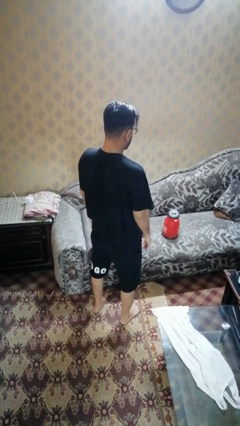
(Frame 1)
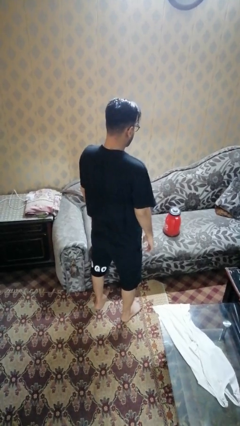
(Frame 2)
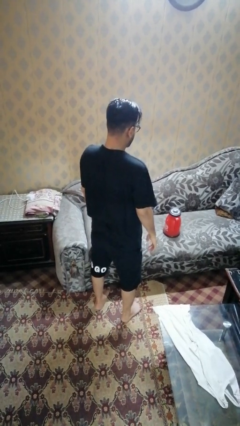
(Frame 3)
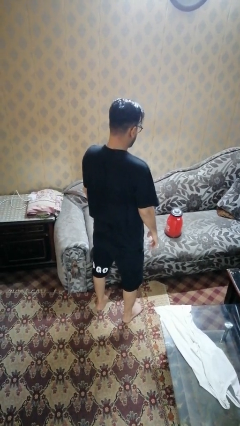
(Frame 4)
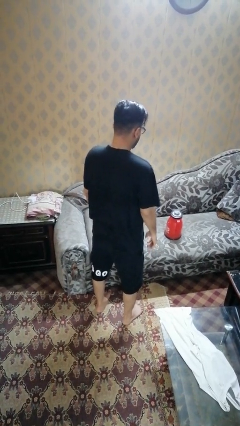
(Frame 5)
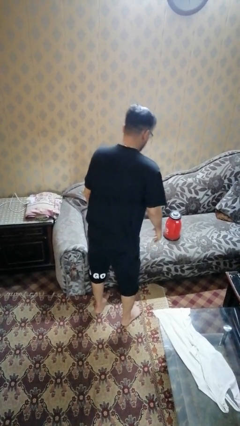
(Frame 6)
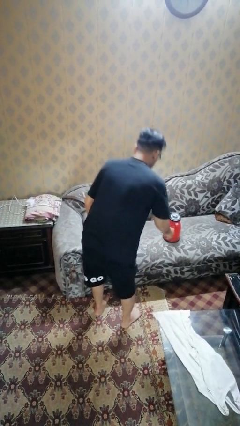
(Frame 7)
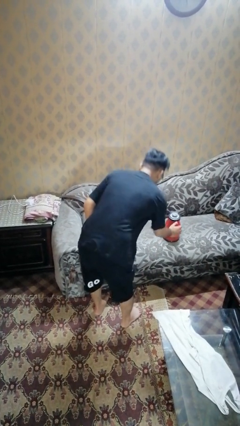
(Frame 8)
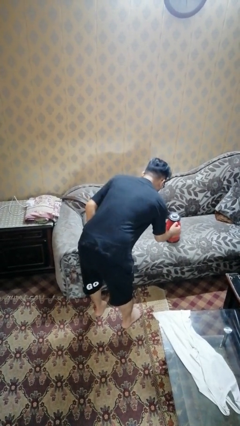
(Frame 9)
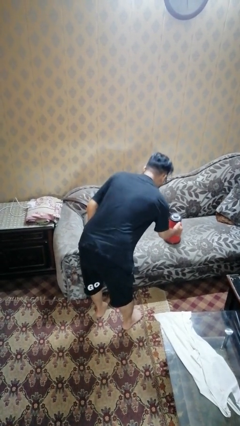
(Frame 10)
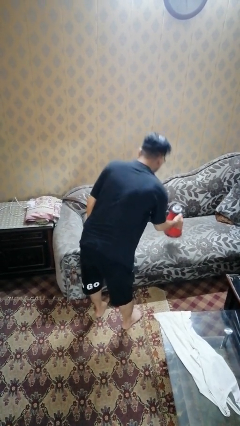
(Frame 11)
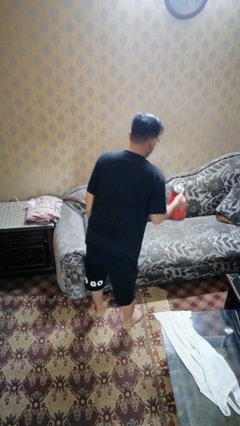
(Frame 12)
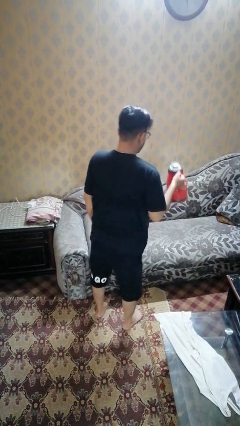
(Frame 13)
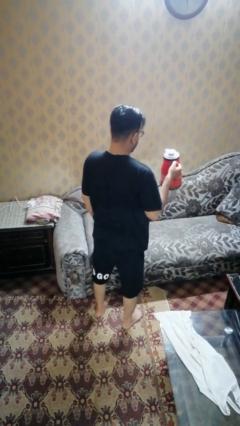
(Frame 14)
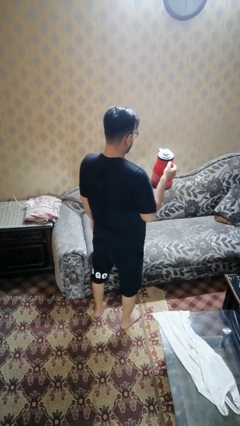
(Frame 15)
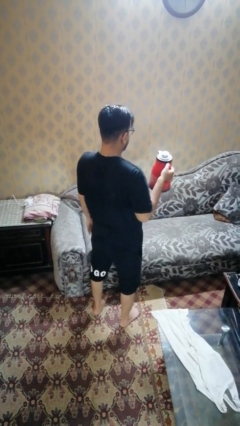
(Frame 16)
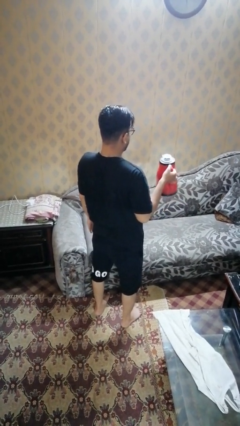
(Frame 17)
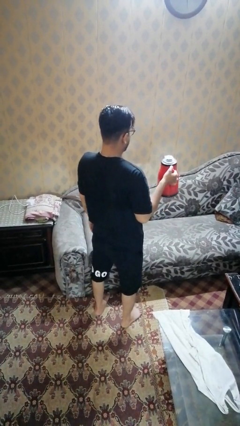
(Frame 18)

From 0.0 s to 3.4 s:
person picks up object from couch

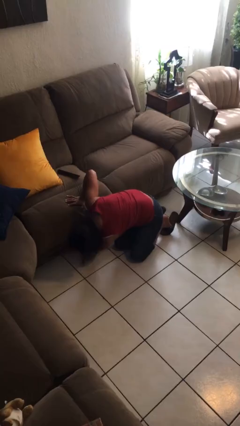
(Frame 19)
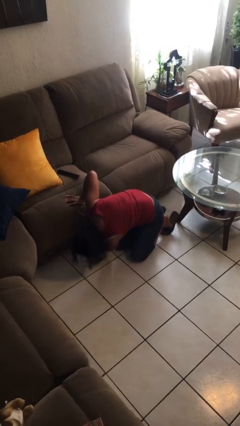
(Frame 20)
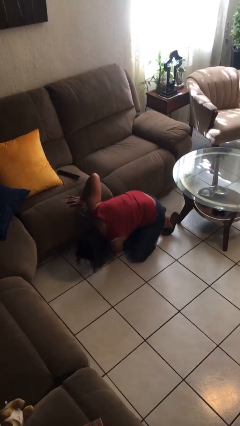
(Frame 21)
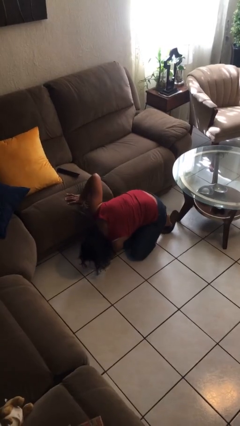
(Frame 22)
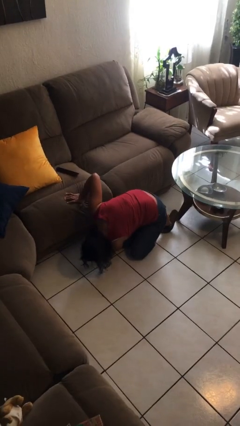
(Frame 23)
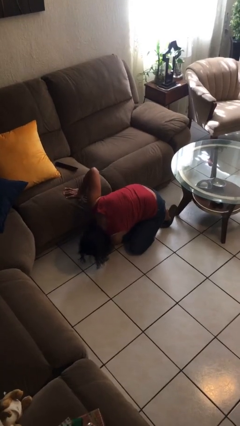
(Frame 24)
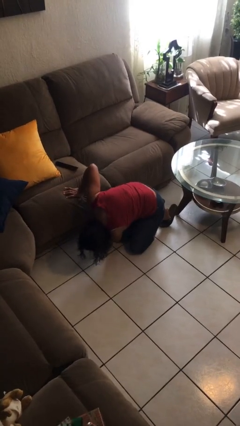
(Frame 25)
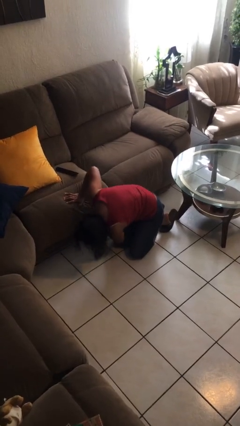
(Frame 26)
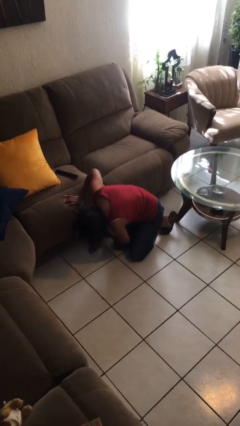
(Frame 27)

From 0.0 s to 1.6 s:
person searches under couch

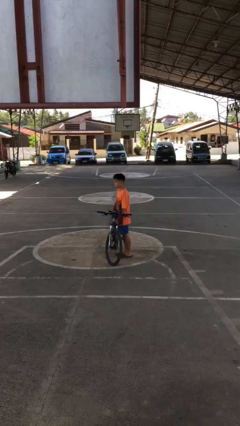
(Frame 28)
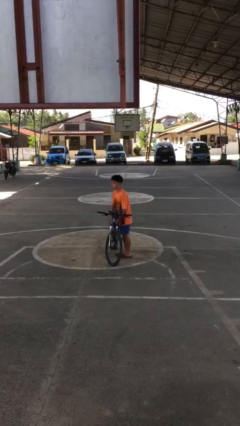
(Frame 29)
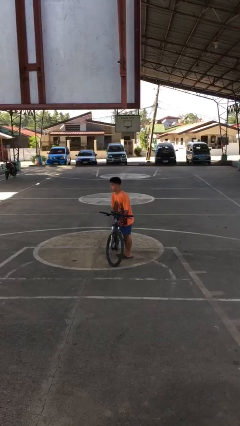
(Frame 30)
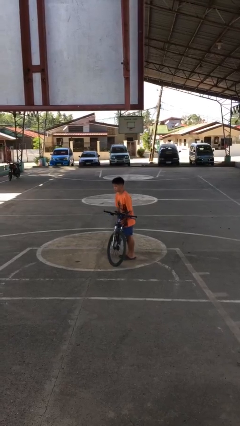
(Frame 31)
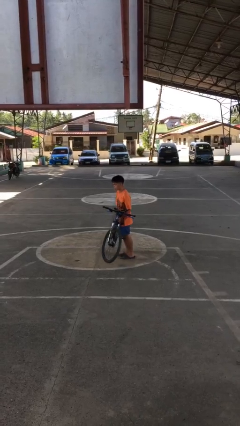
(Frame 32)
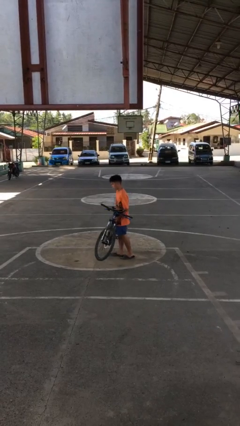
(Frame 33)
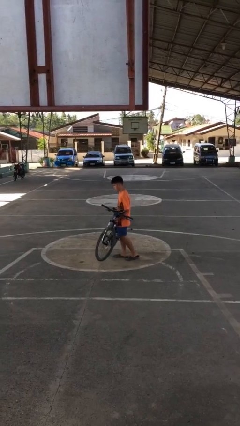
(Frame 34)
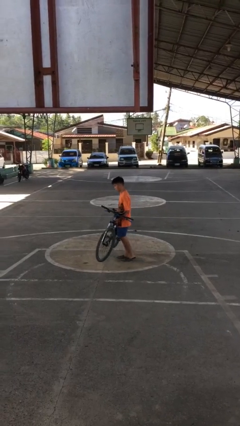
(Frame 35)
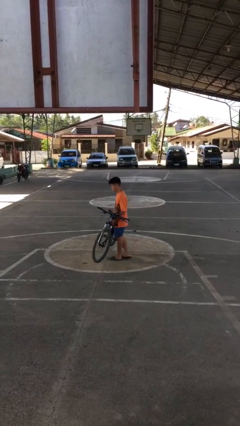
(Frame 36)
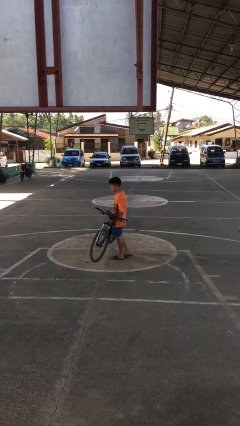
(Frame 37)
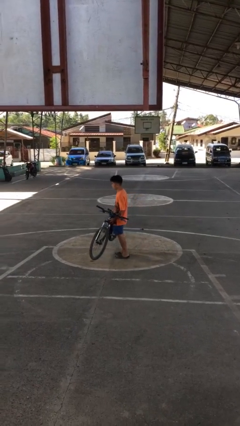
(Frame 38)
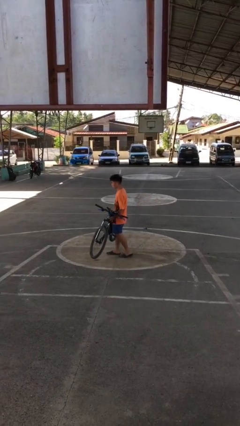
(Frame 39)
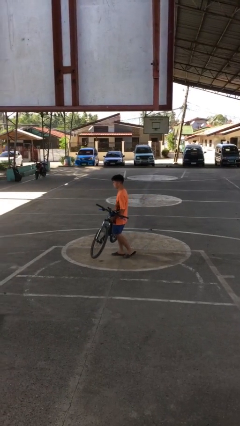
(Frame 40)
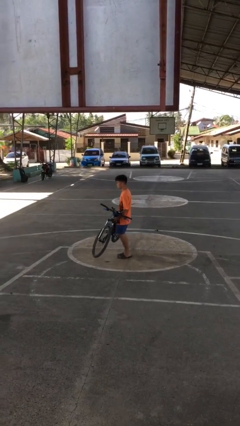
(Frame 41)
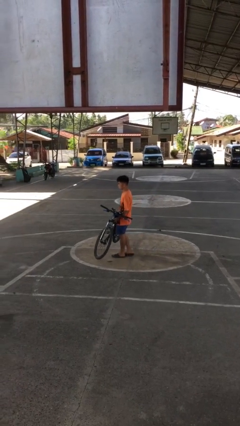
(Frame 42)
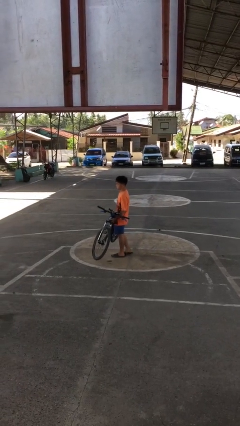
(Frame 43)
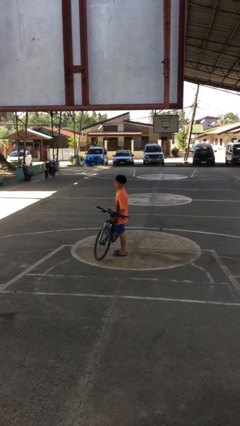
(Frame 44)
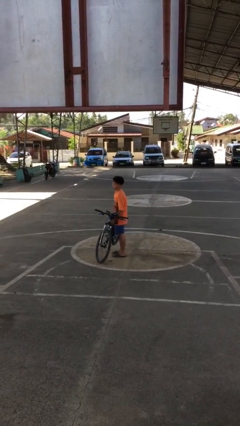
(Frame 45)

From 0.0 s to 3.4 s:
person carries bicycle

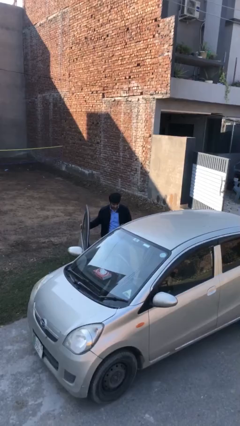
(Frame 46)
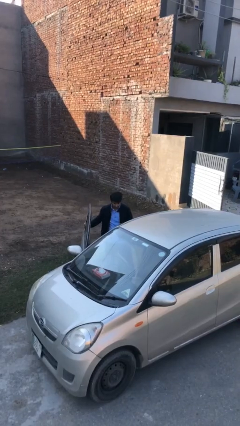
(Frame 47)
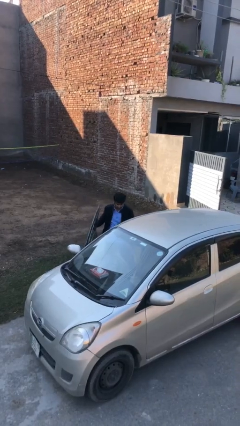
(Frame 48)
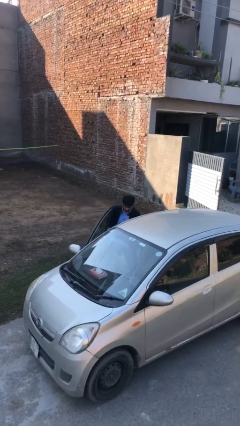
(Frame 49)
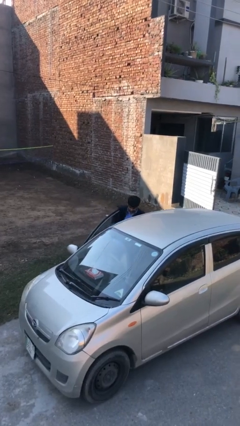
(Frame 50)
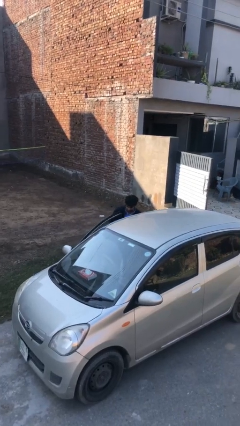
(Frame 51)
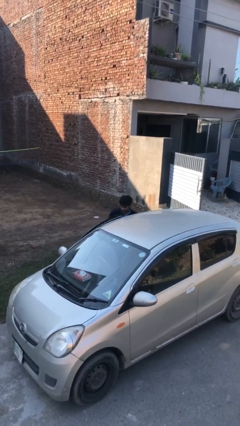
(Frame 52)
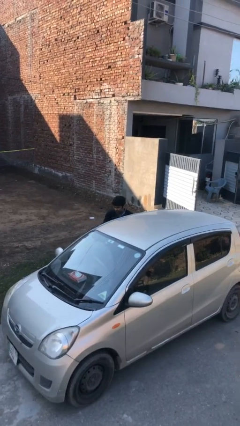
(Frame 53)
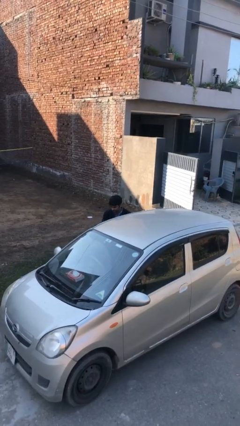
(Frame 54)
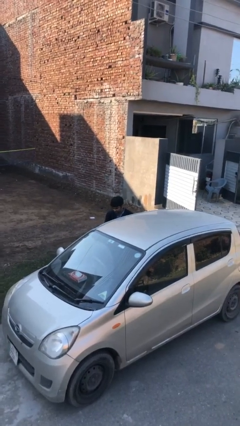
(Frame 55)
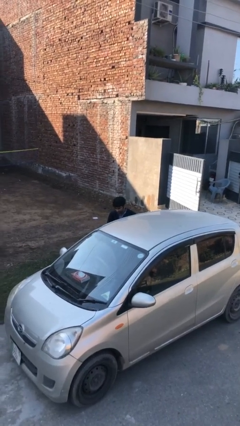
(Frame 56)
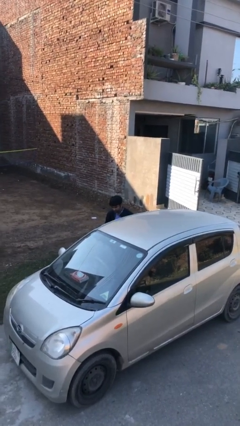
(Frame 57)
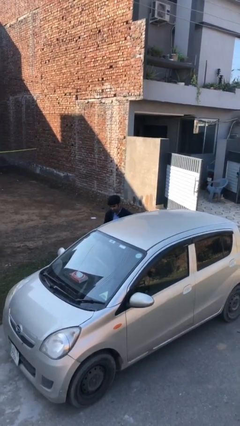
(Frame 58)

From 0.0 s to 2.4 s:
person closes car door

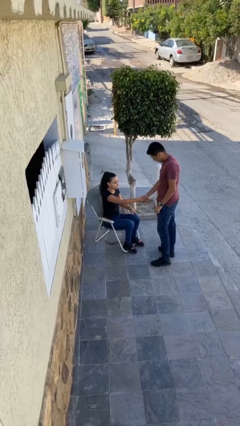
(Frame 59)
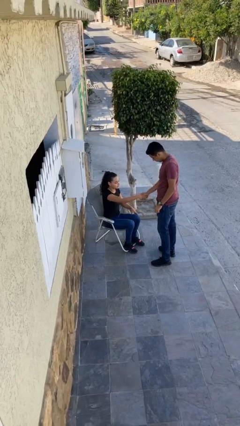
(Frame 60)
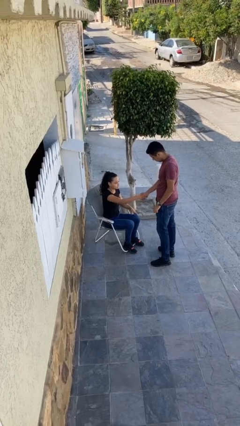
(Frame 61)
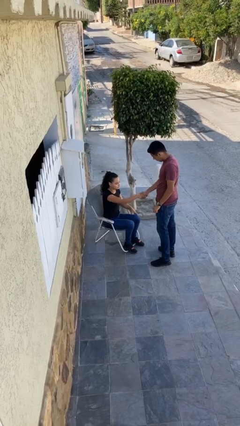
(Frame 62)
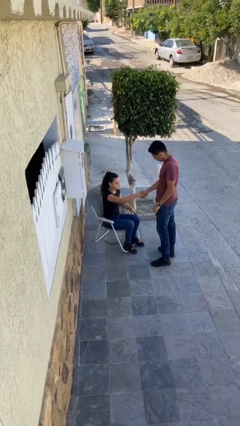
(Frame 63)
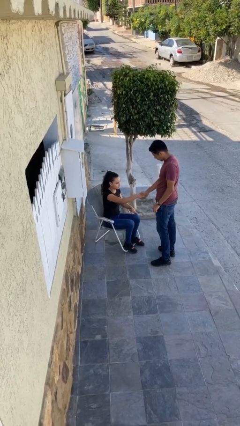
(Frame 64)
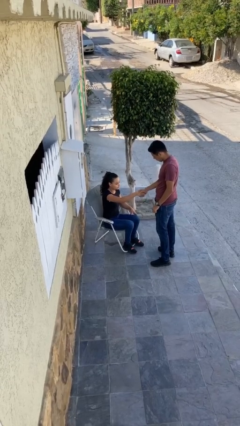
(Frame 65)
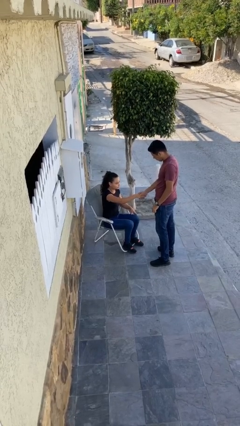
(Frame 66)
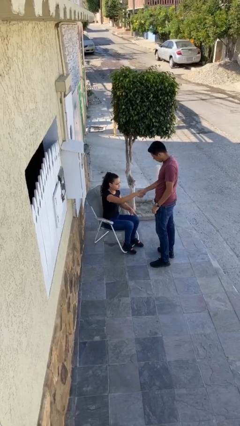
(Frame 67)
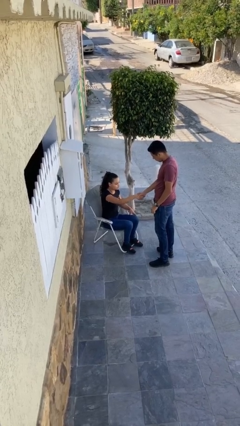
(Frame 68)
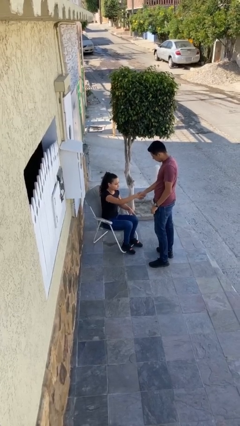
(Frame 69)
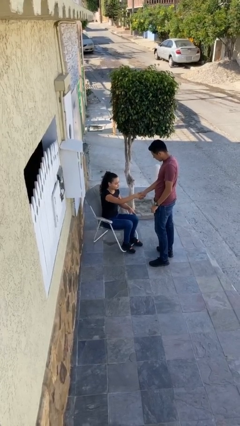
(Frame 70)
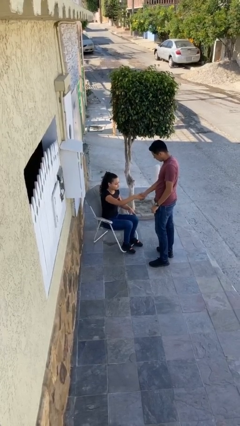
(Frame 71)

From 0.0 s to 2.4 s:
person shakes hand

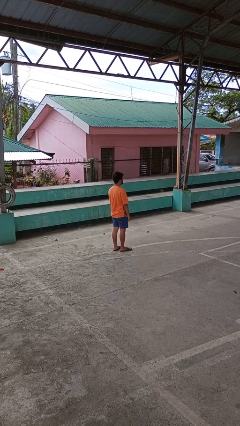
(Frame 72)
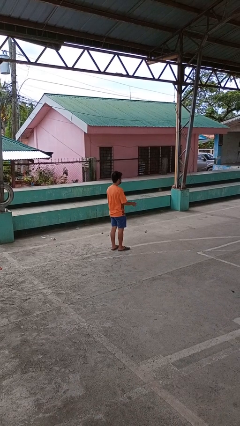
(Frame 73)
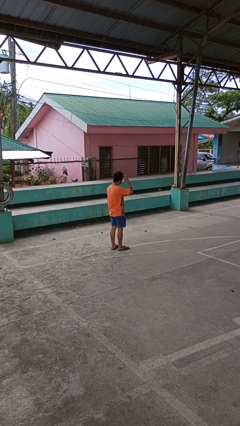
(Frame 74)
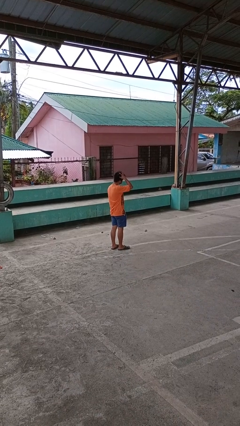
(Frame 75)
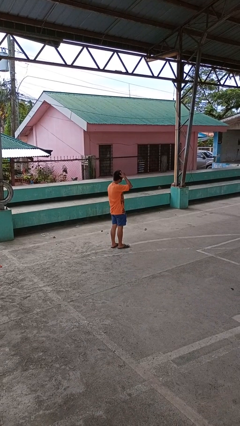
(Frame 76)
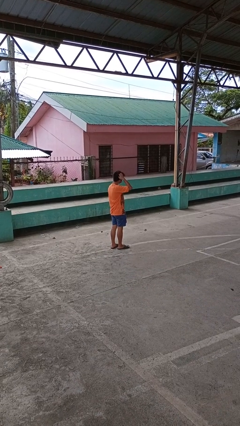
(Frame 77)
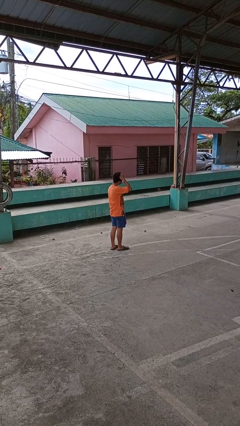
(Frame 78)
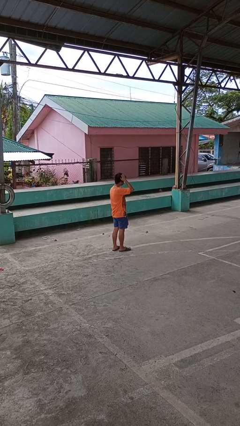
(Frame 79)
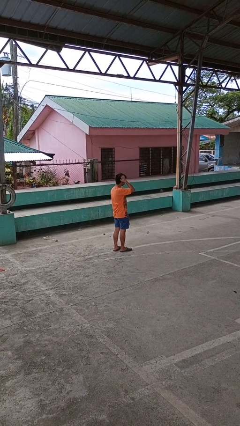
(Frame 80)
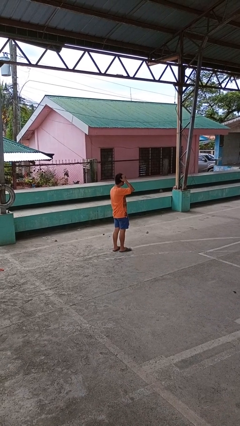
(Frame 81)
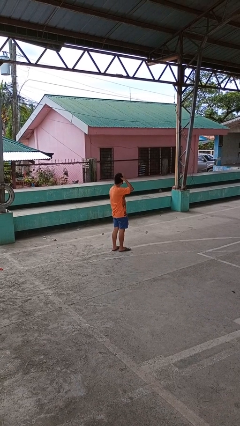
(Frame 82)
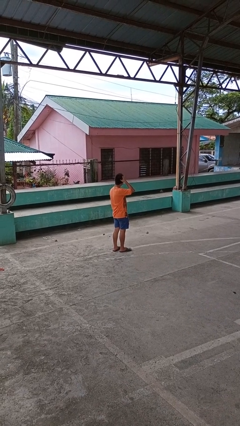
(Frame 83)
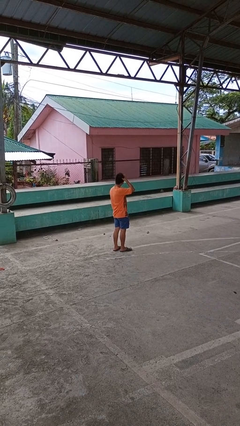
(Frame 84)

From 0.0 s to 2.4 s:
person scratches face

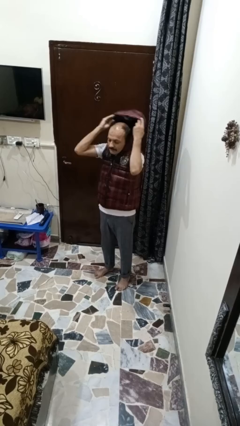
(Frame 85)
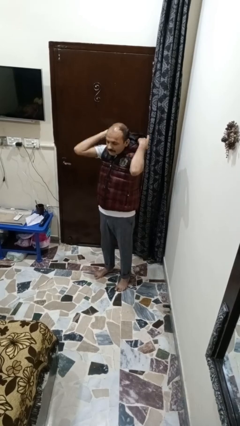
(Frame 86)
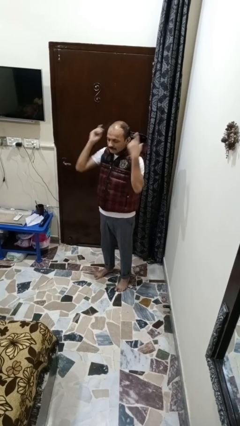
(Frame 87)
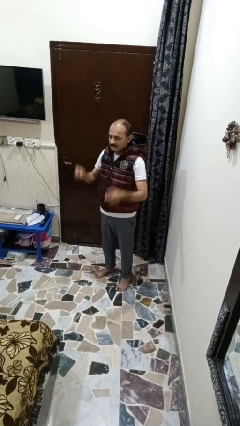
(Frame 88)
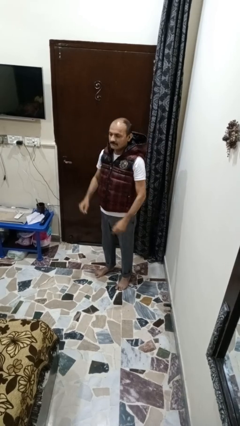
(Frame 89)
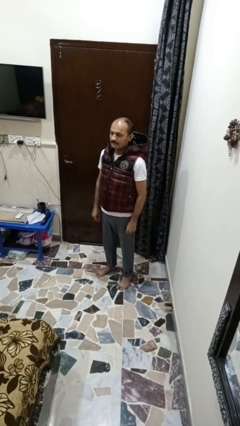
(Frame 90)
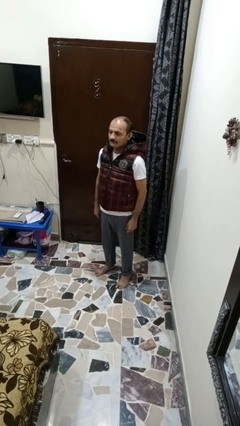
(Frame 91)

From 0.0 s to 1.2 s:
person takes off hoodie

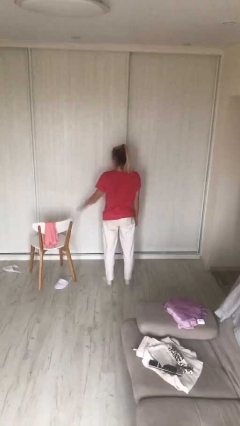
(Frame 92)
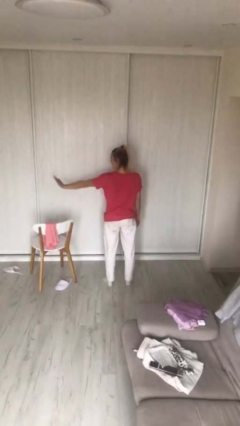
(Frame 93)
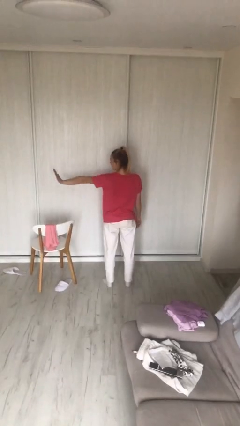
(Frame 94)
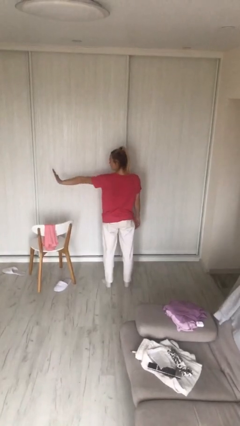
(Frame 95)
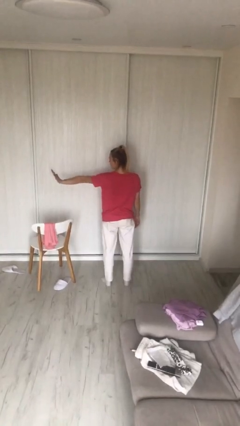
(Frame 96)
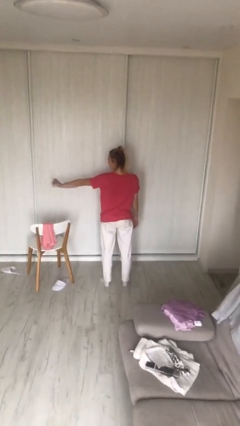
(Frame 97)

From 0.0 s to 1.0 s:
person gestures stop
